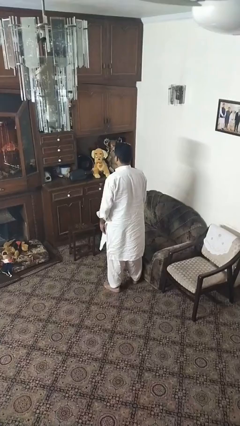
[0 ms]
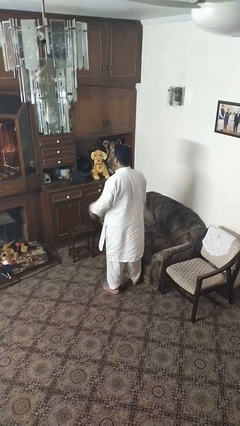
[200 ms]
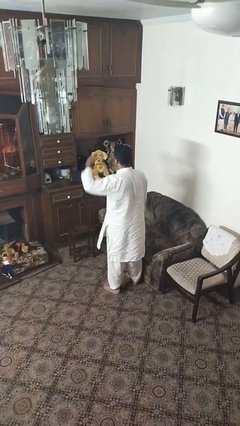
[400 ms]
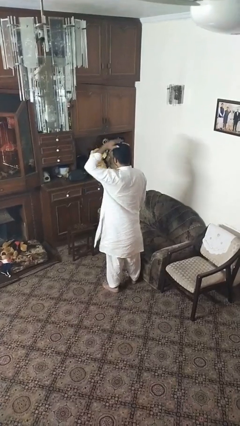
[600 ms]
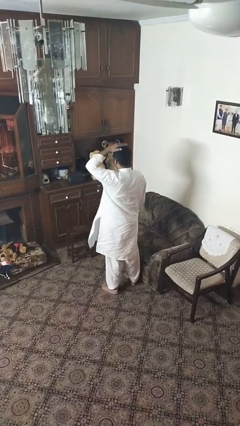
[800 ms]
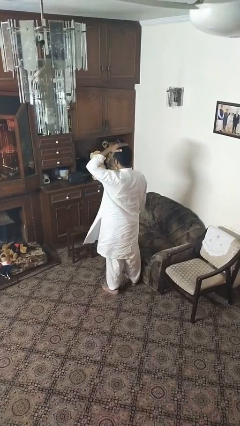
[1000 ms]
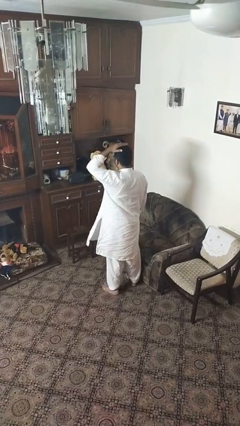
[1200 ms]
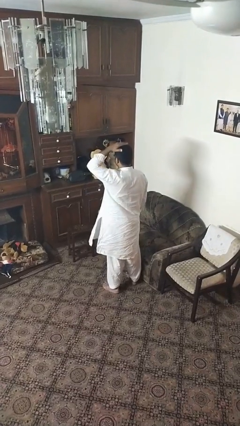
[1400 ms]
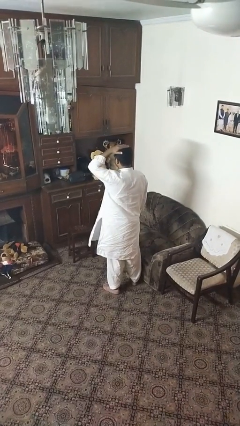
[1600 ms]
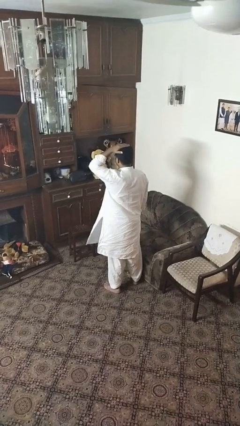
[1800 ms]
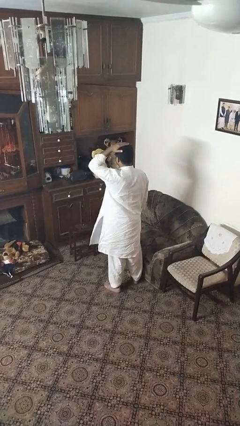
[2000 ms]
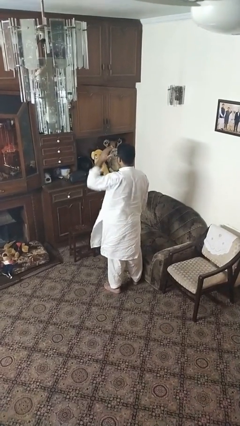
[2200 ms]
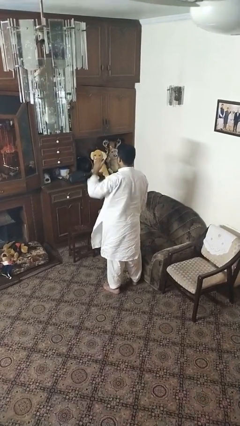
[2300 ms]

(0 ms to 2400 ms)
person pats head

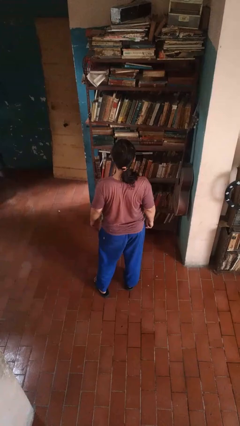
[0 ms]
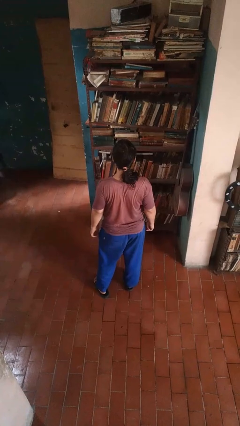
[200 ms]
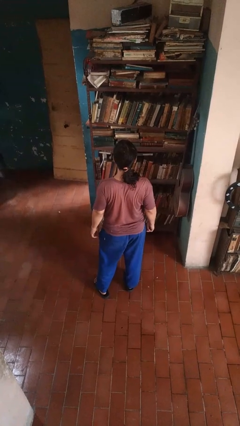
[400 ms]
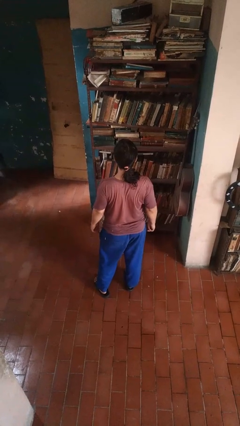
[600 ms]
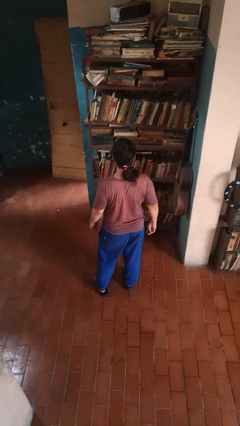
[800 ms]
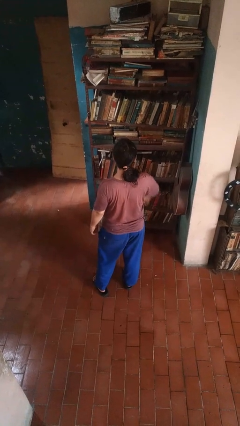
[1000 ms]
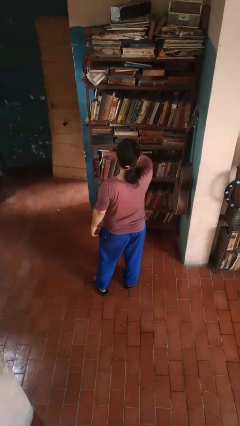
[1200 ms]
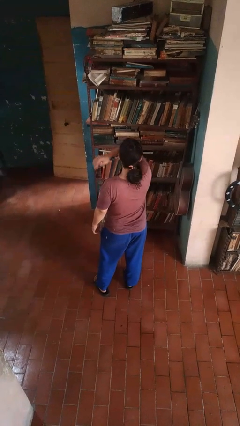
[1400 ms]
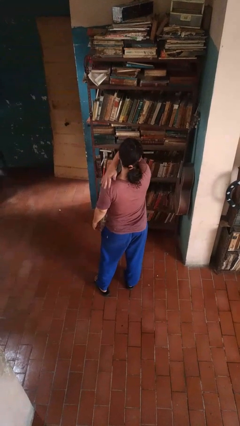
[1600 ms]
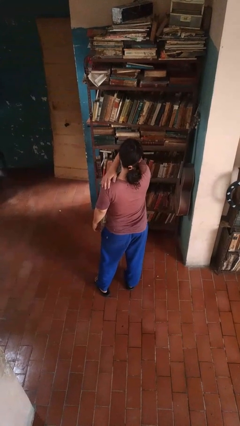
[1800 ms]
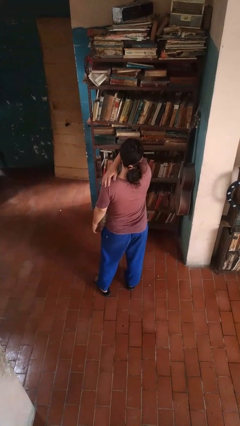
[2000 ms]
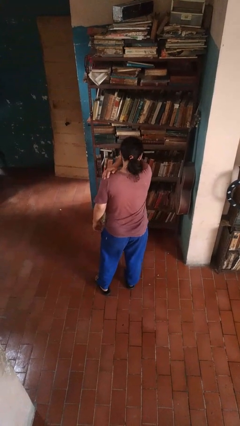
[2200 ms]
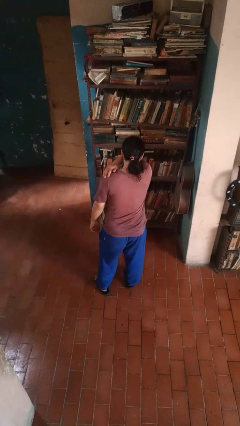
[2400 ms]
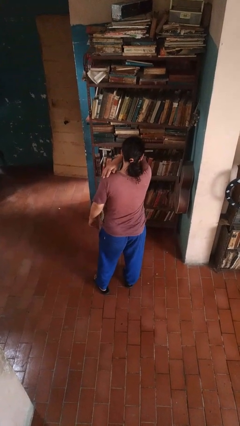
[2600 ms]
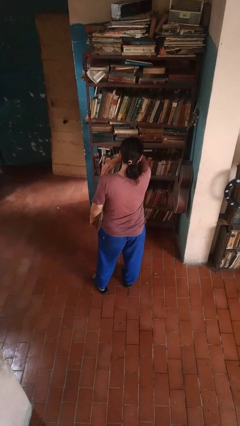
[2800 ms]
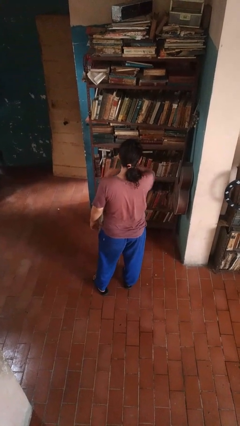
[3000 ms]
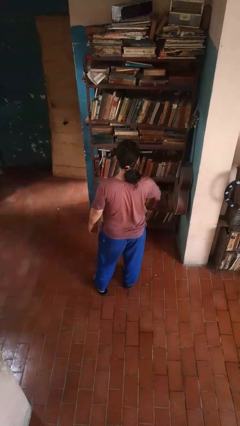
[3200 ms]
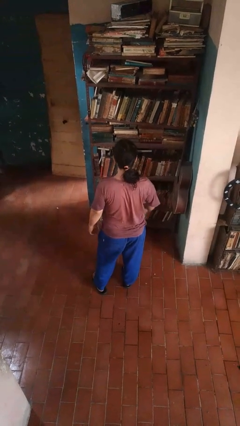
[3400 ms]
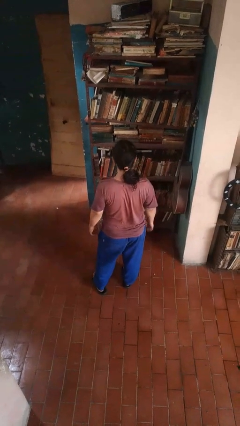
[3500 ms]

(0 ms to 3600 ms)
person sneezes into arm

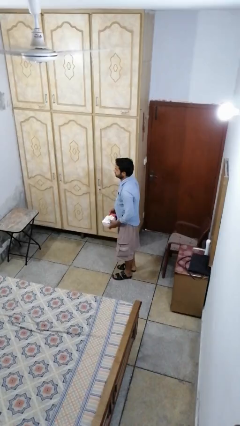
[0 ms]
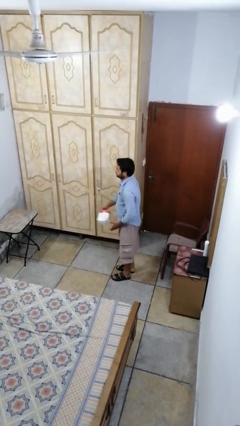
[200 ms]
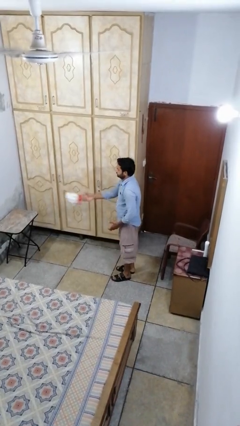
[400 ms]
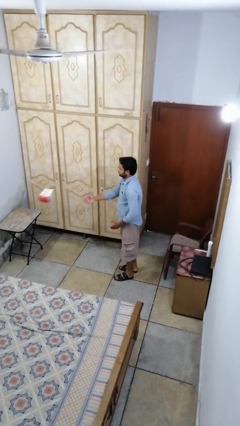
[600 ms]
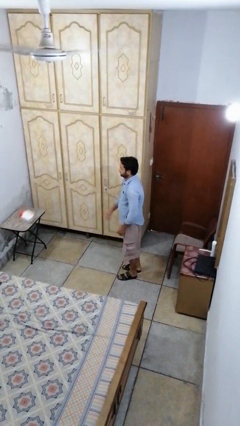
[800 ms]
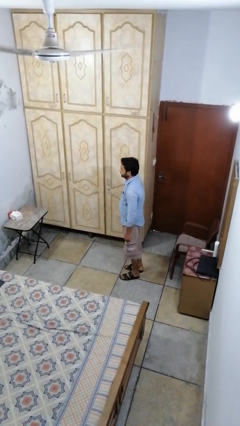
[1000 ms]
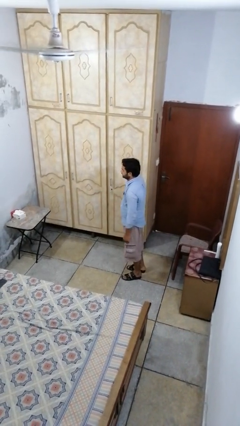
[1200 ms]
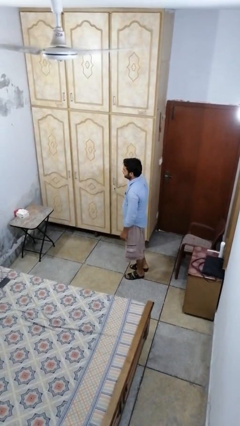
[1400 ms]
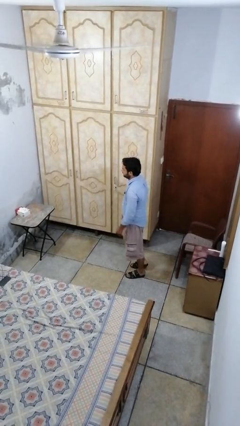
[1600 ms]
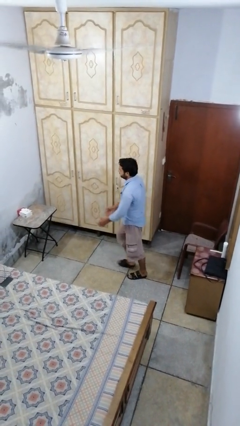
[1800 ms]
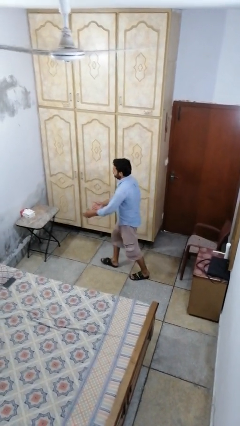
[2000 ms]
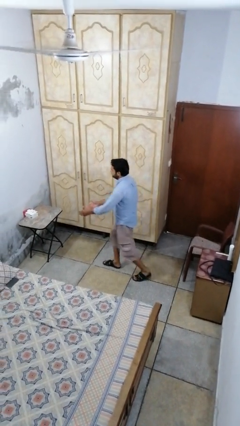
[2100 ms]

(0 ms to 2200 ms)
person throws object on table

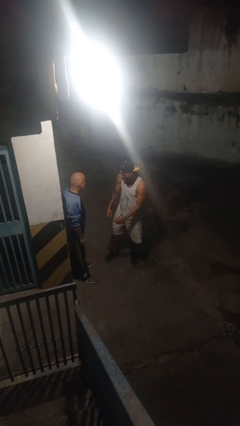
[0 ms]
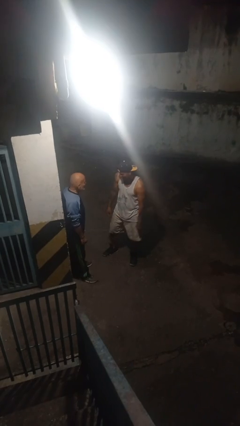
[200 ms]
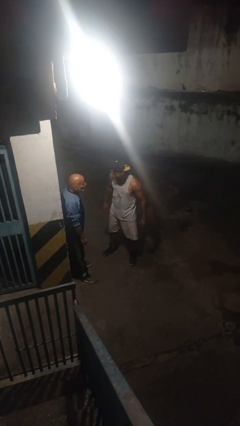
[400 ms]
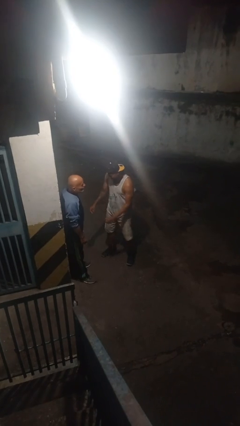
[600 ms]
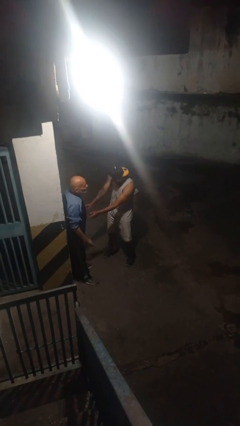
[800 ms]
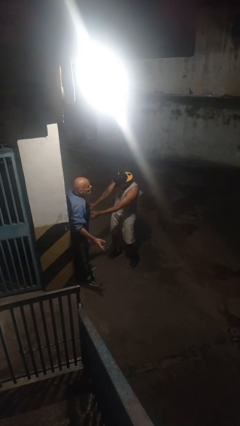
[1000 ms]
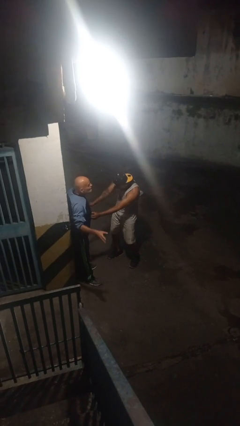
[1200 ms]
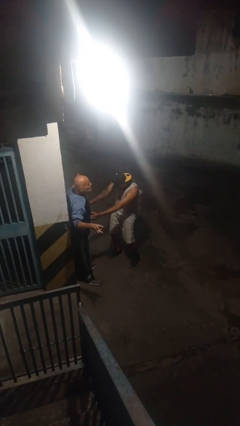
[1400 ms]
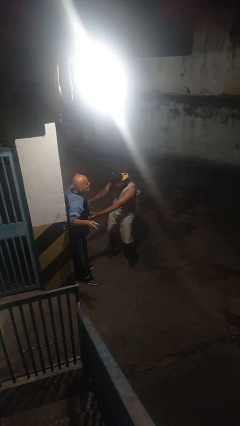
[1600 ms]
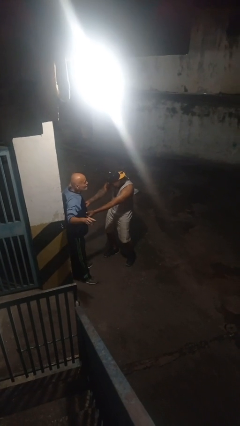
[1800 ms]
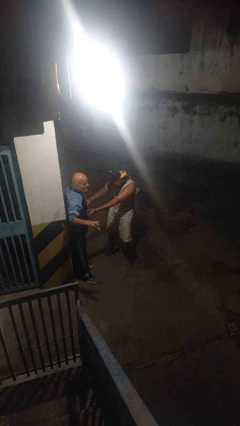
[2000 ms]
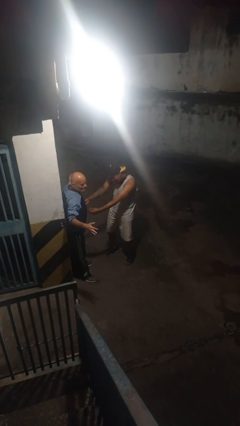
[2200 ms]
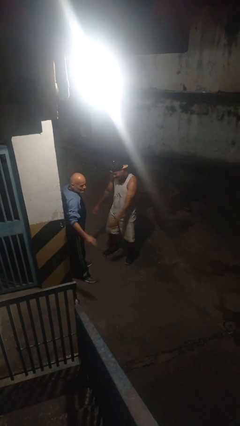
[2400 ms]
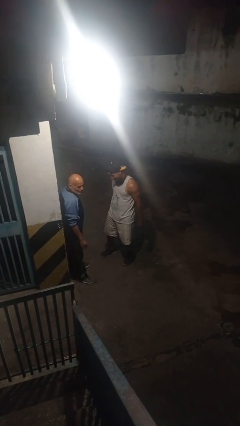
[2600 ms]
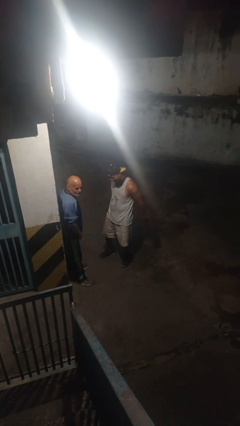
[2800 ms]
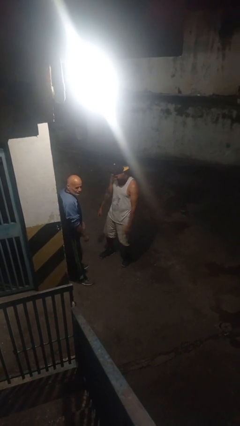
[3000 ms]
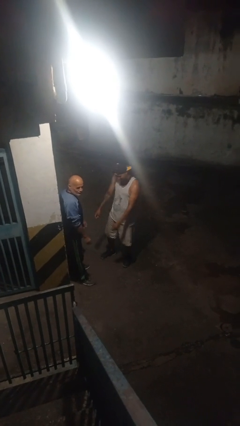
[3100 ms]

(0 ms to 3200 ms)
person tickles person

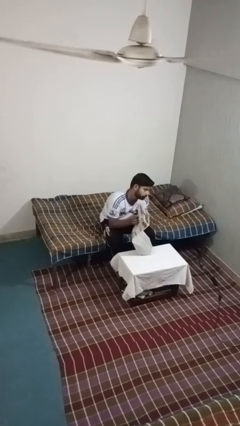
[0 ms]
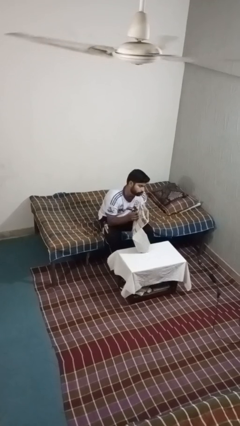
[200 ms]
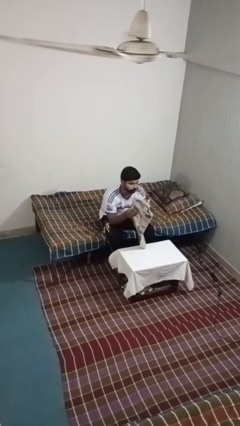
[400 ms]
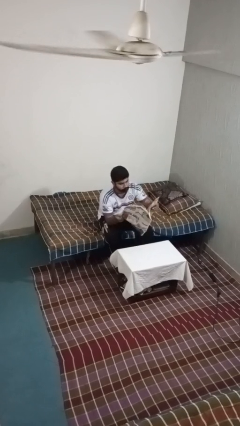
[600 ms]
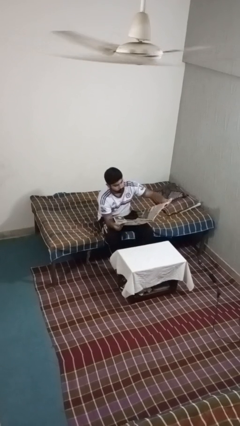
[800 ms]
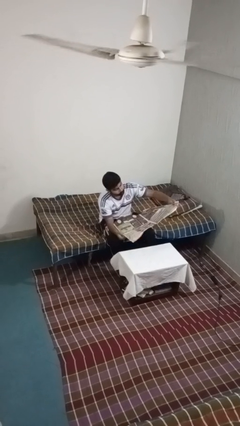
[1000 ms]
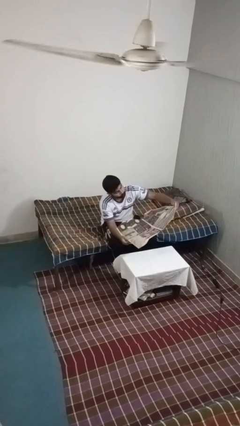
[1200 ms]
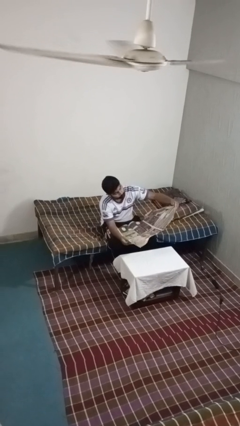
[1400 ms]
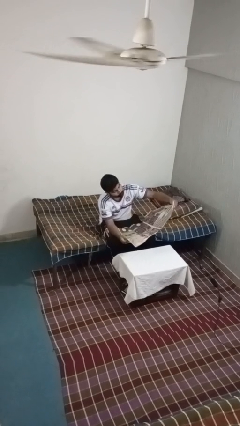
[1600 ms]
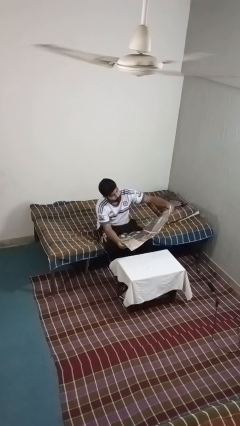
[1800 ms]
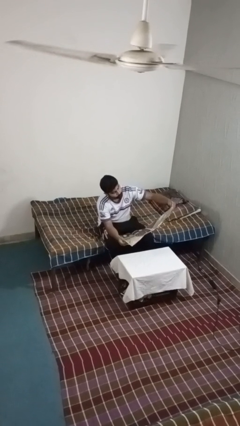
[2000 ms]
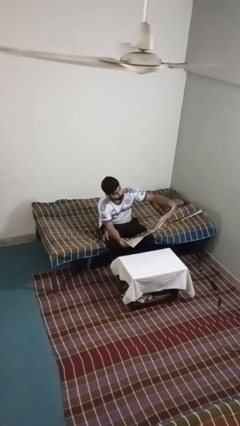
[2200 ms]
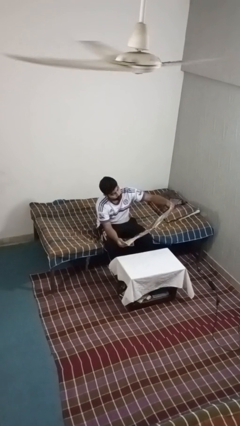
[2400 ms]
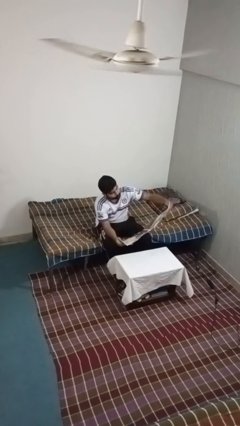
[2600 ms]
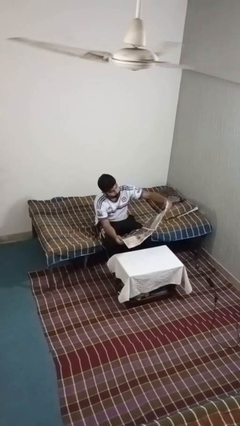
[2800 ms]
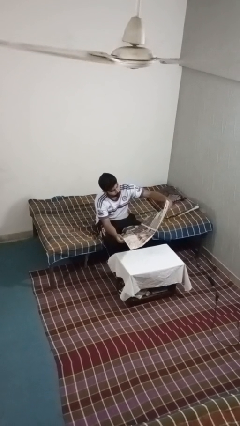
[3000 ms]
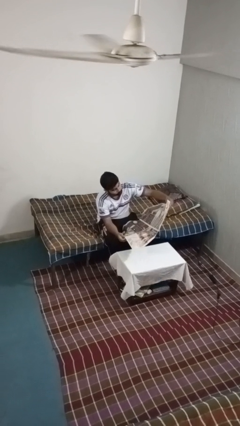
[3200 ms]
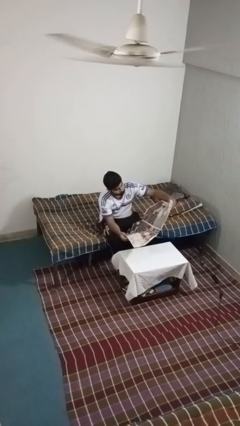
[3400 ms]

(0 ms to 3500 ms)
person reads newspaper

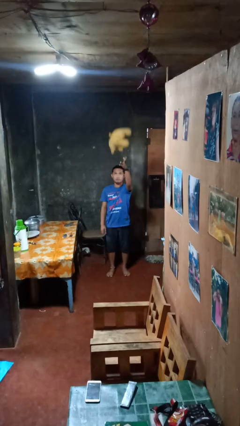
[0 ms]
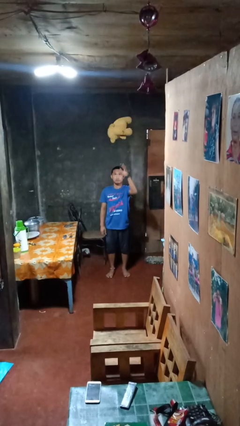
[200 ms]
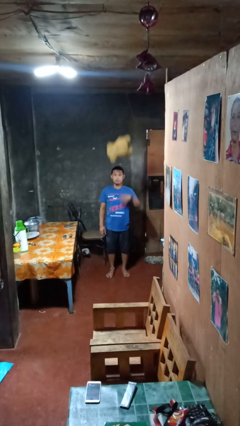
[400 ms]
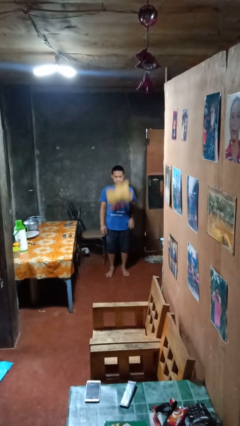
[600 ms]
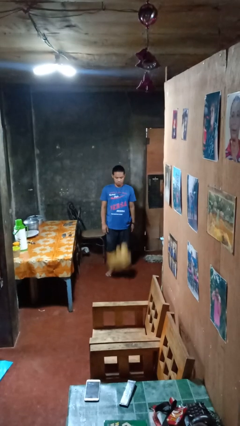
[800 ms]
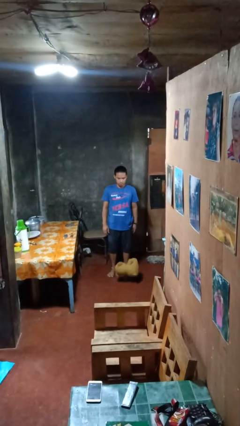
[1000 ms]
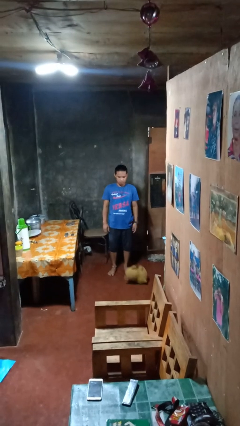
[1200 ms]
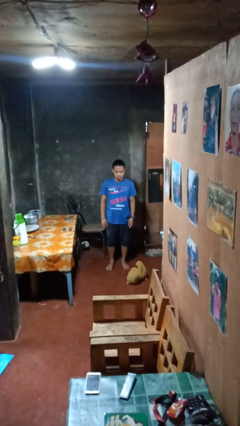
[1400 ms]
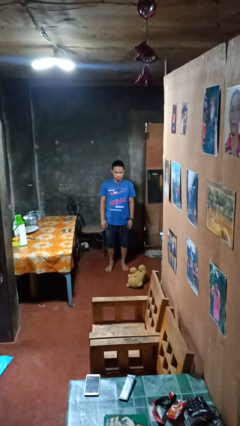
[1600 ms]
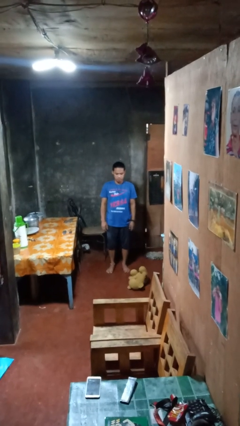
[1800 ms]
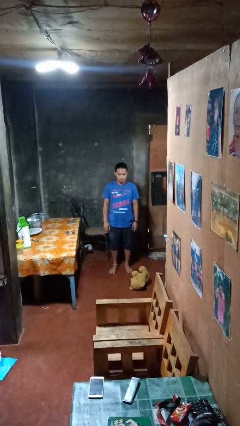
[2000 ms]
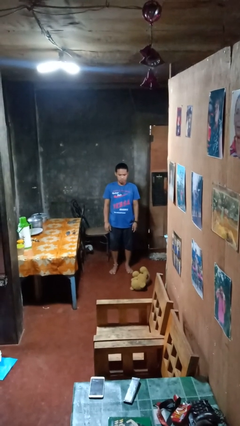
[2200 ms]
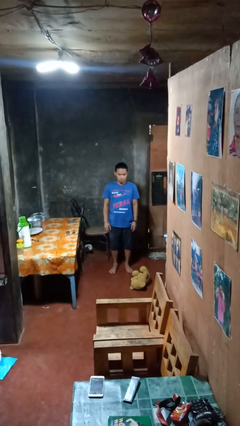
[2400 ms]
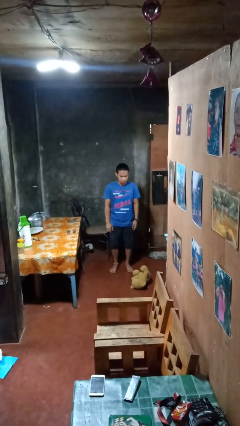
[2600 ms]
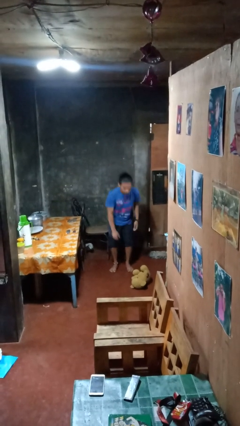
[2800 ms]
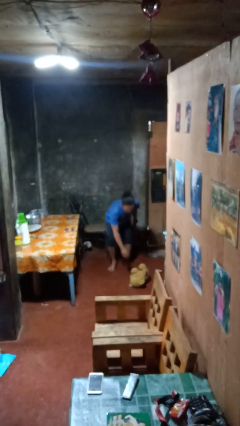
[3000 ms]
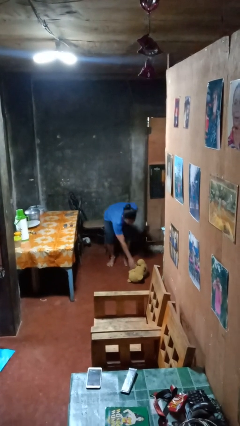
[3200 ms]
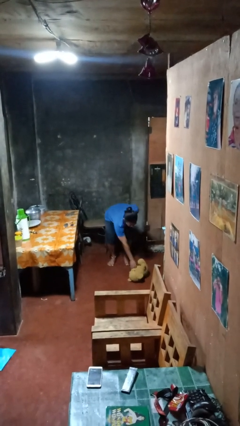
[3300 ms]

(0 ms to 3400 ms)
person throws object into air
